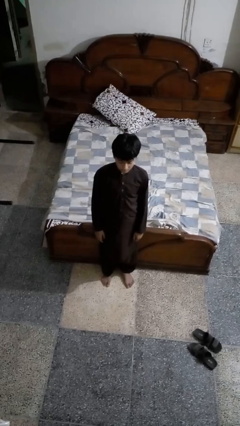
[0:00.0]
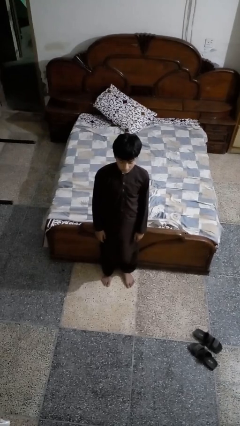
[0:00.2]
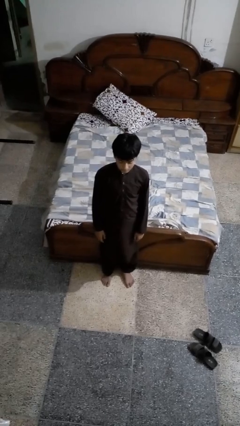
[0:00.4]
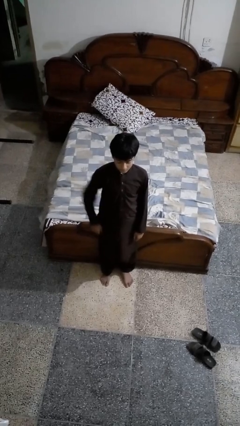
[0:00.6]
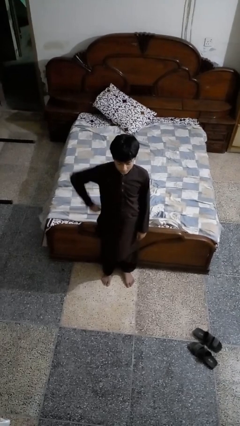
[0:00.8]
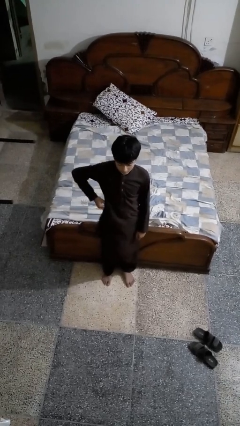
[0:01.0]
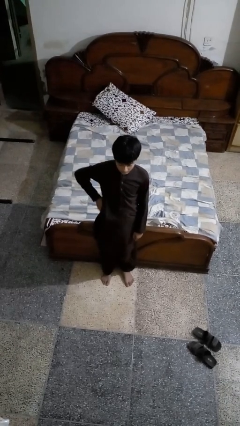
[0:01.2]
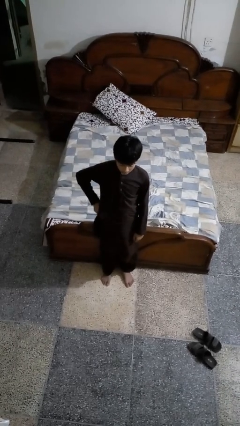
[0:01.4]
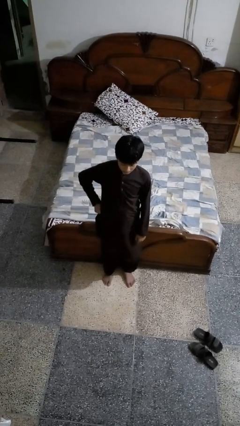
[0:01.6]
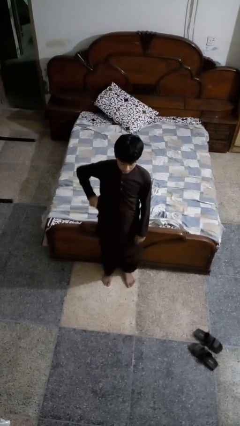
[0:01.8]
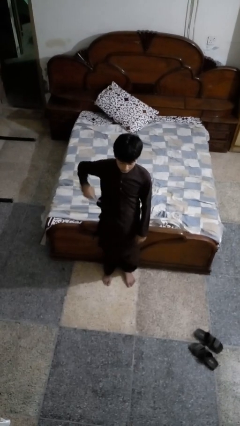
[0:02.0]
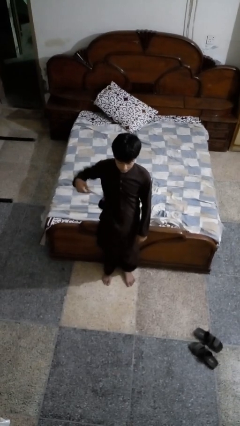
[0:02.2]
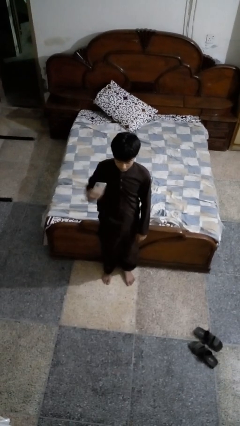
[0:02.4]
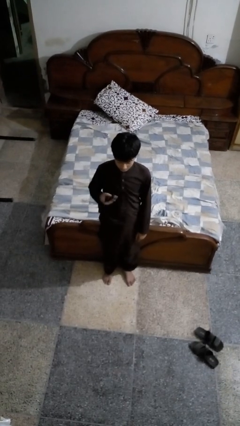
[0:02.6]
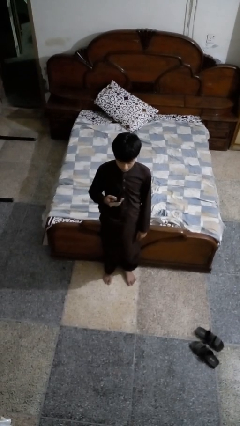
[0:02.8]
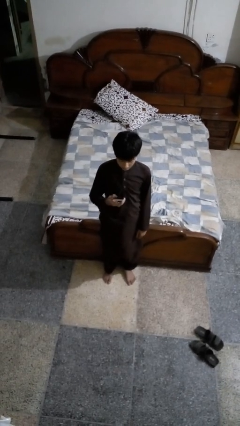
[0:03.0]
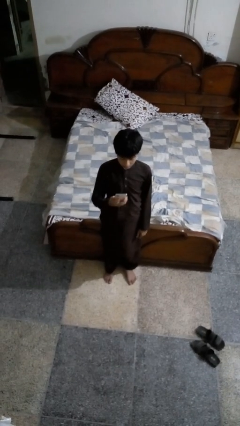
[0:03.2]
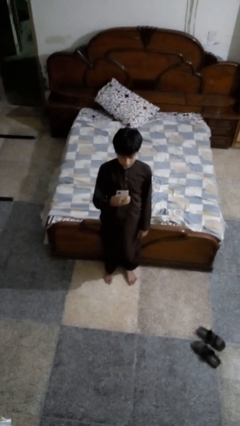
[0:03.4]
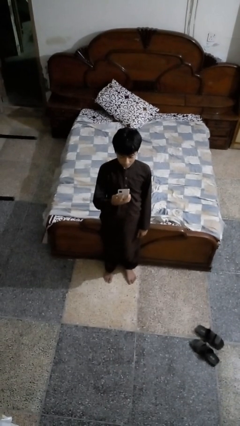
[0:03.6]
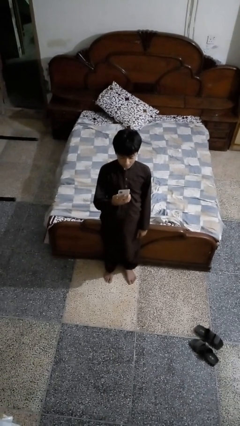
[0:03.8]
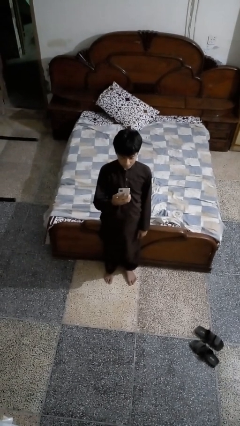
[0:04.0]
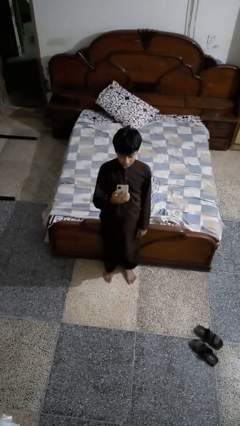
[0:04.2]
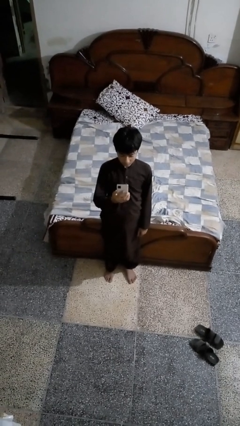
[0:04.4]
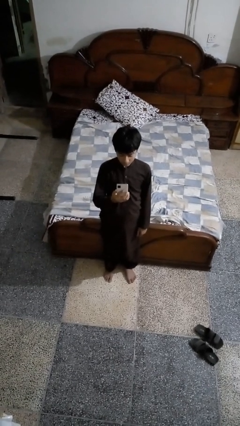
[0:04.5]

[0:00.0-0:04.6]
person takes phone from pocket

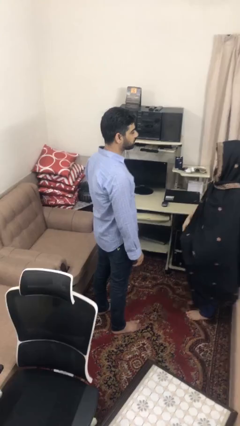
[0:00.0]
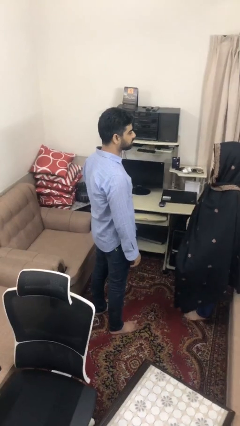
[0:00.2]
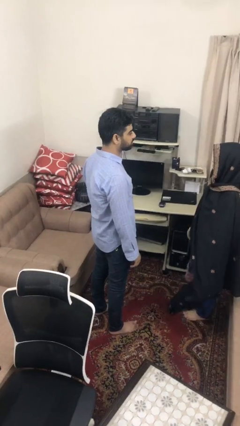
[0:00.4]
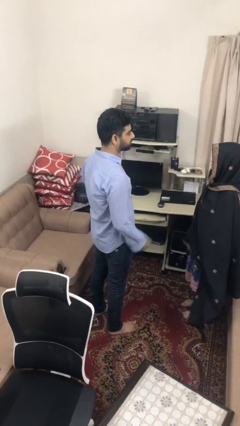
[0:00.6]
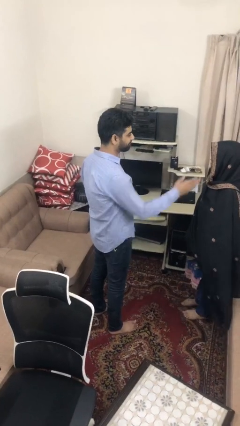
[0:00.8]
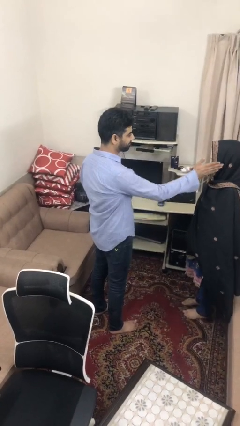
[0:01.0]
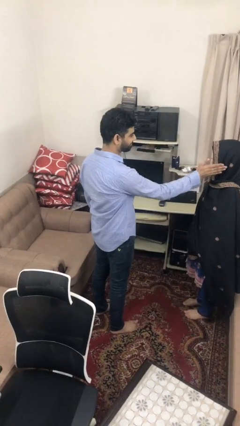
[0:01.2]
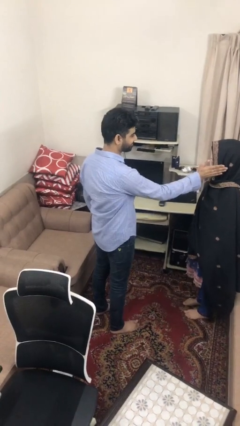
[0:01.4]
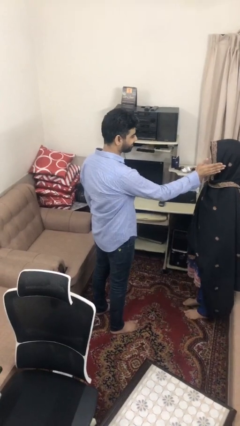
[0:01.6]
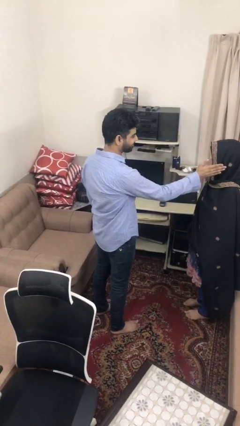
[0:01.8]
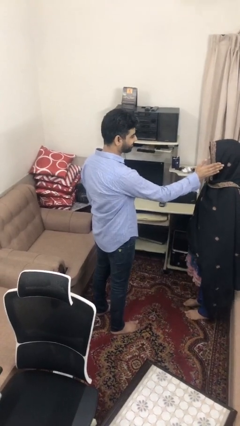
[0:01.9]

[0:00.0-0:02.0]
person touches face of person

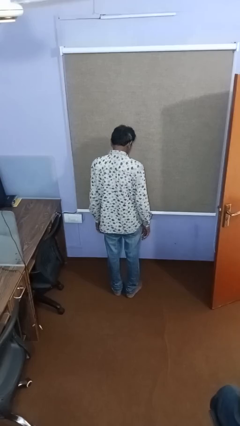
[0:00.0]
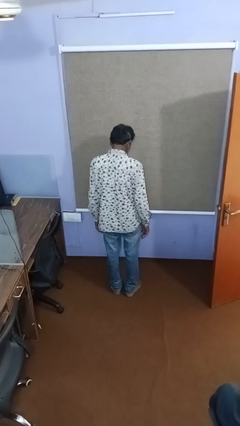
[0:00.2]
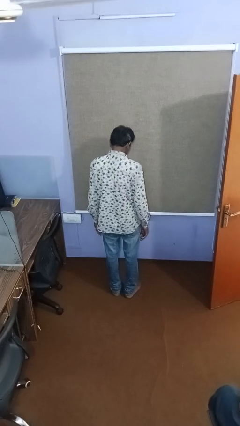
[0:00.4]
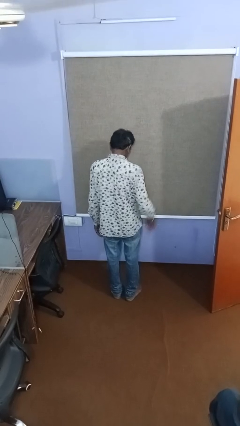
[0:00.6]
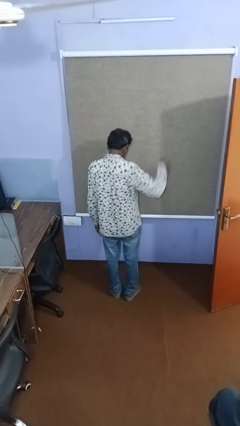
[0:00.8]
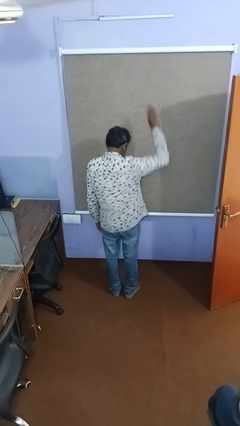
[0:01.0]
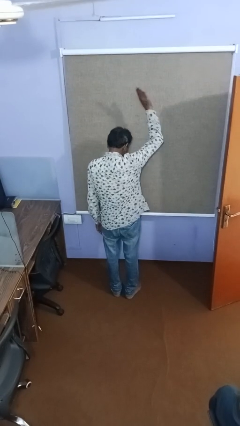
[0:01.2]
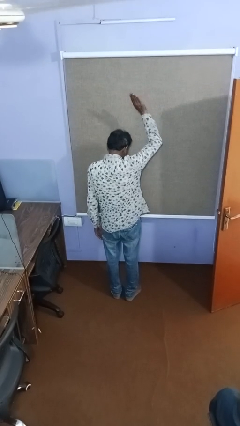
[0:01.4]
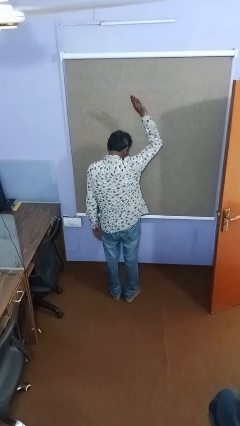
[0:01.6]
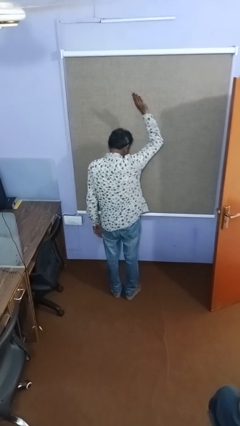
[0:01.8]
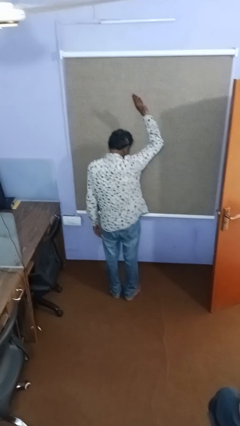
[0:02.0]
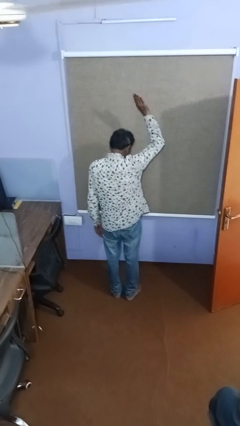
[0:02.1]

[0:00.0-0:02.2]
person gestures raise hand

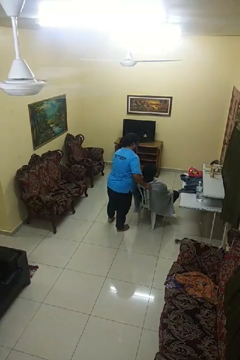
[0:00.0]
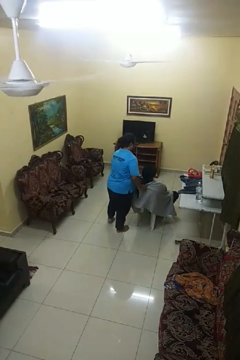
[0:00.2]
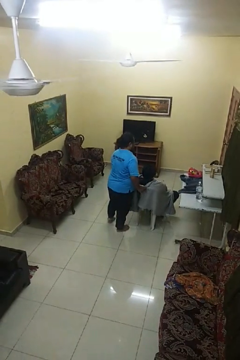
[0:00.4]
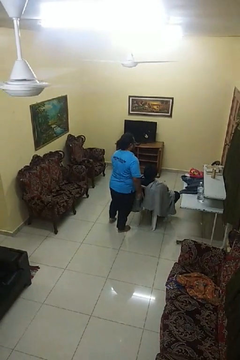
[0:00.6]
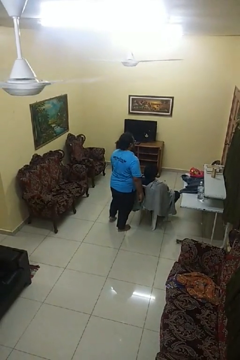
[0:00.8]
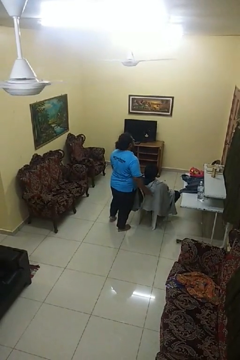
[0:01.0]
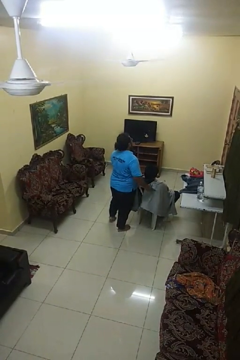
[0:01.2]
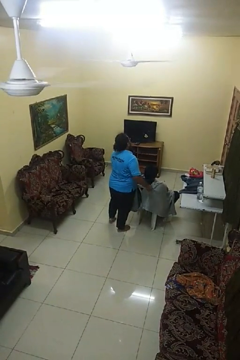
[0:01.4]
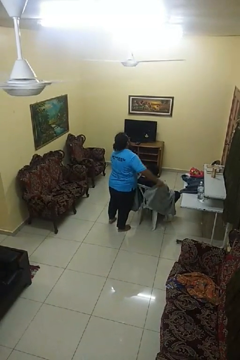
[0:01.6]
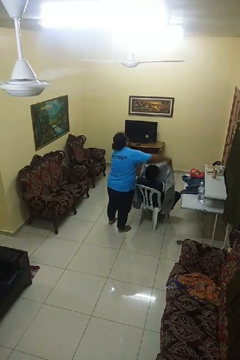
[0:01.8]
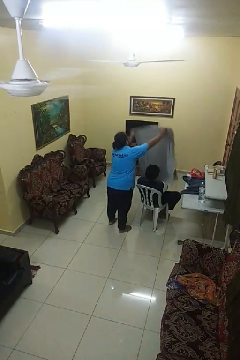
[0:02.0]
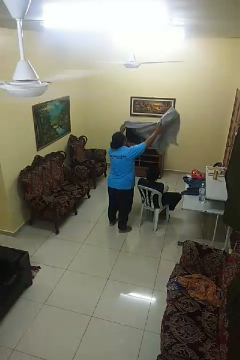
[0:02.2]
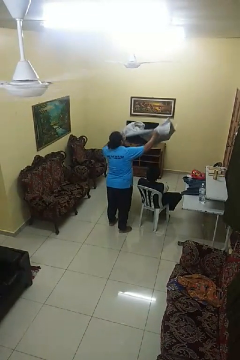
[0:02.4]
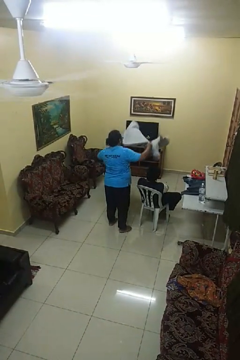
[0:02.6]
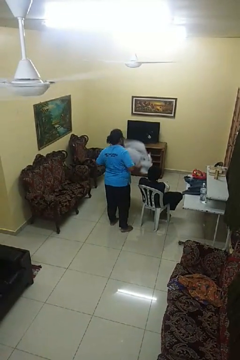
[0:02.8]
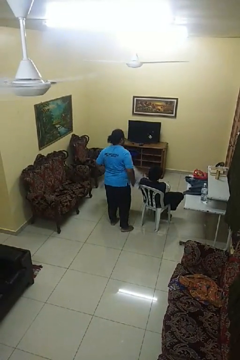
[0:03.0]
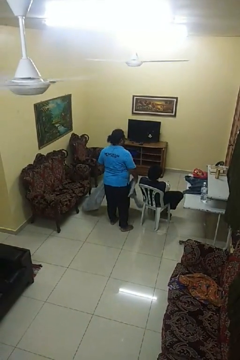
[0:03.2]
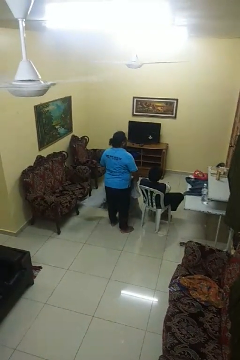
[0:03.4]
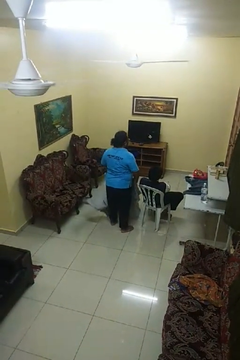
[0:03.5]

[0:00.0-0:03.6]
person uncovers friend with blanket

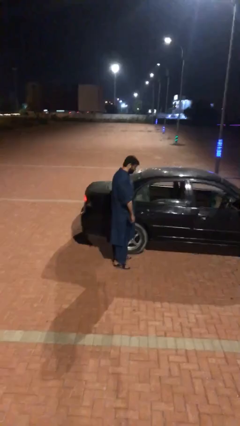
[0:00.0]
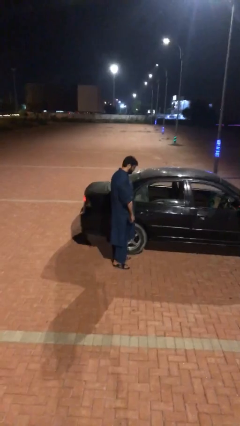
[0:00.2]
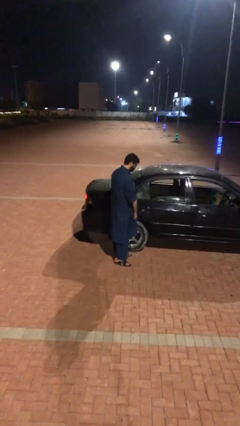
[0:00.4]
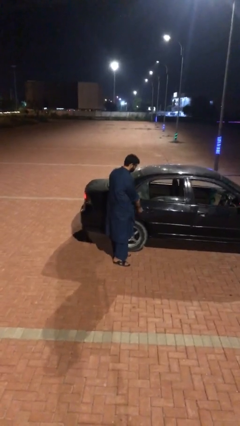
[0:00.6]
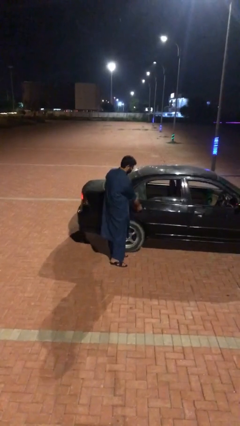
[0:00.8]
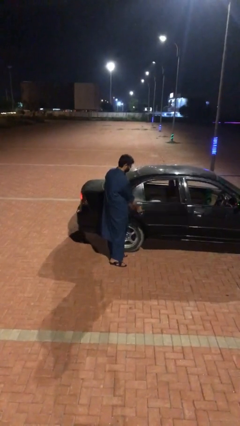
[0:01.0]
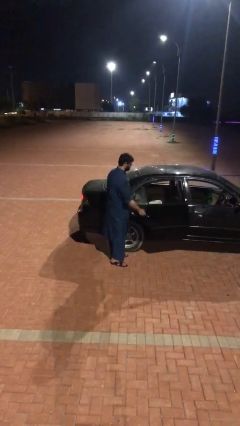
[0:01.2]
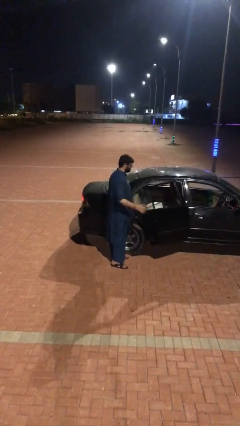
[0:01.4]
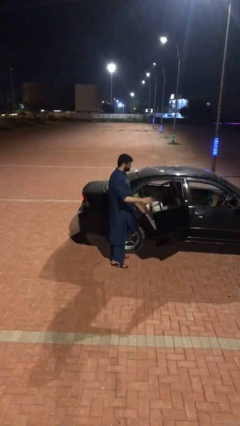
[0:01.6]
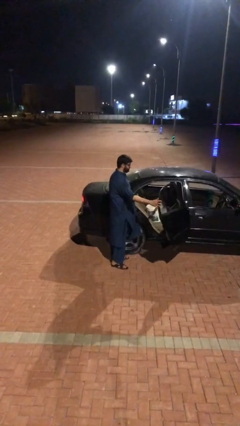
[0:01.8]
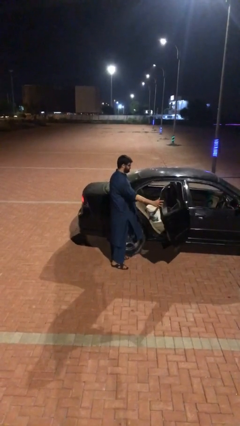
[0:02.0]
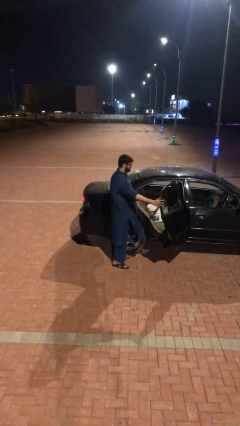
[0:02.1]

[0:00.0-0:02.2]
person opens car door

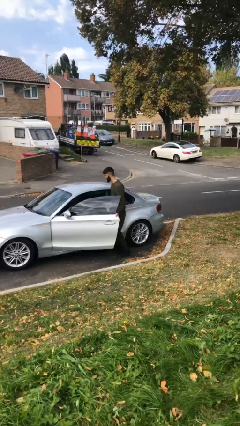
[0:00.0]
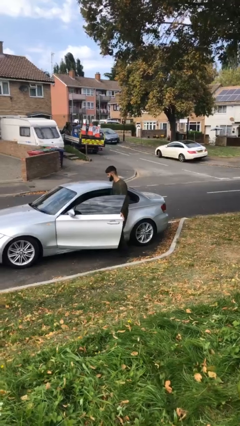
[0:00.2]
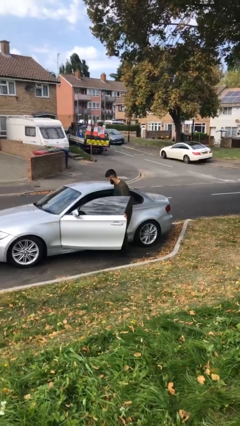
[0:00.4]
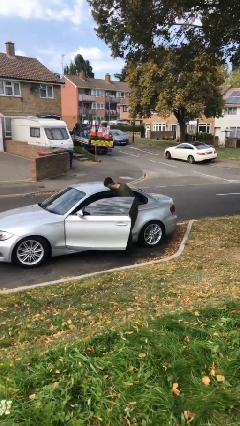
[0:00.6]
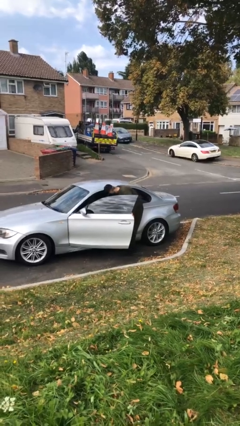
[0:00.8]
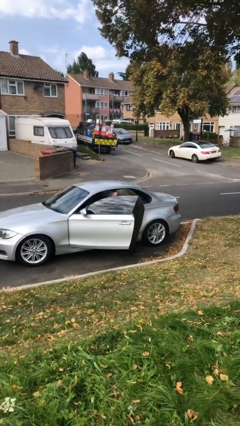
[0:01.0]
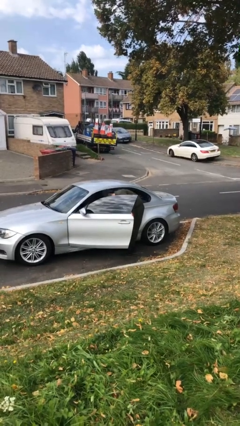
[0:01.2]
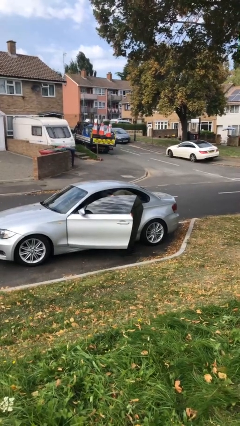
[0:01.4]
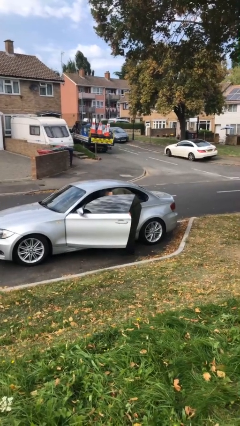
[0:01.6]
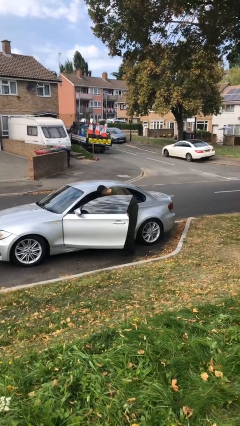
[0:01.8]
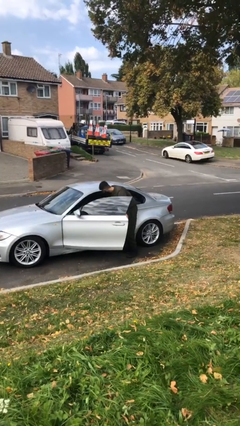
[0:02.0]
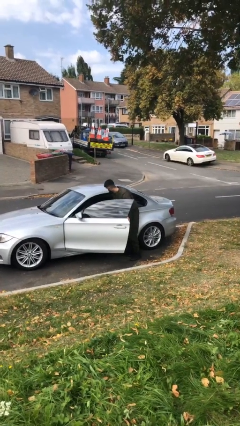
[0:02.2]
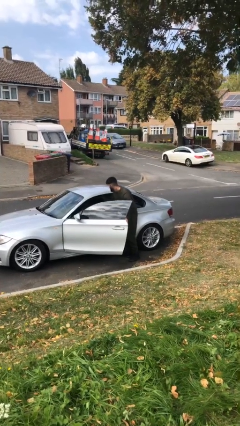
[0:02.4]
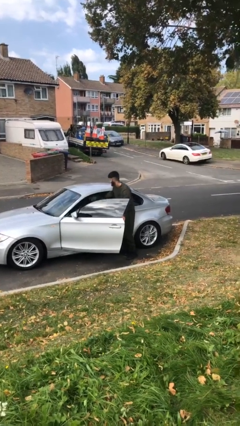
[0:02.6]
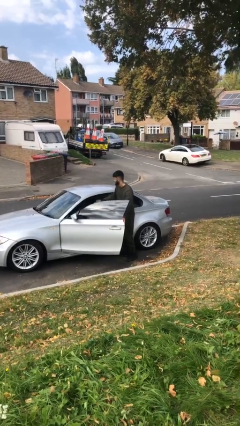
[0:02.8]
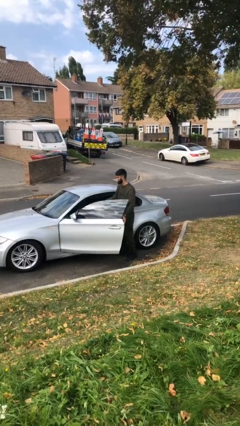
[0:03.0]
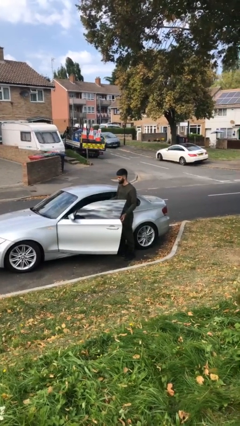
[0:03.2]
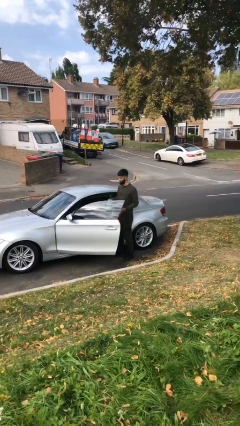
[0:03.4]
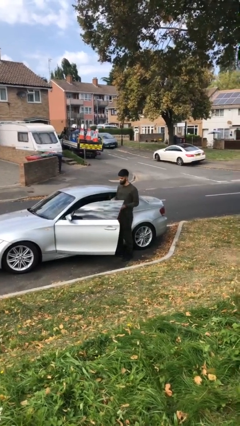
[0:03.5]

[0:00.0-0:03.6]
person unloads car
